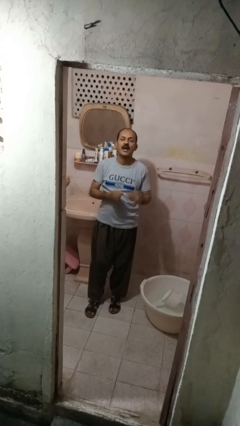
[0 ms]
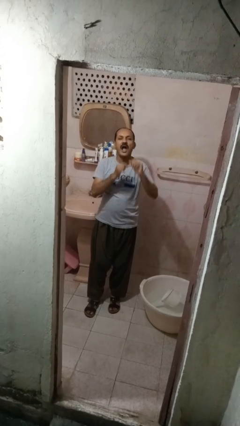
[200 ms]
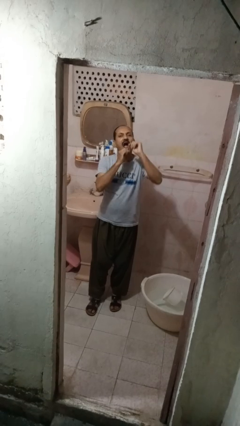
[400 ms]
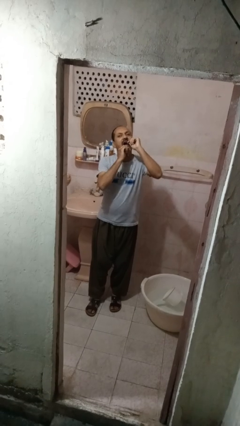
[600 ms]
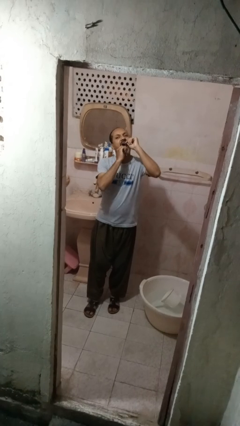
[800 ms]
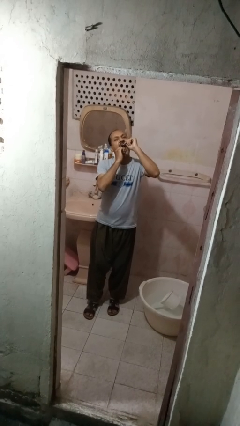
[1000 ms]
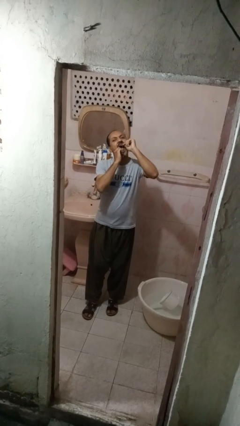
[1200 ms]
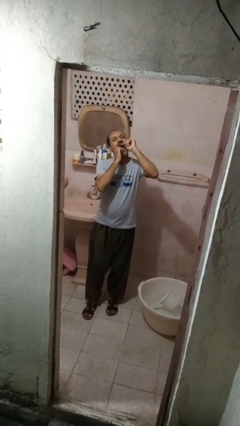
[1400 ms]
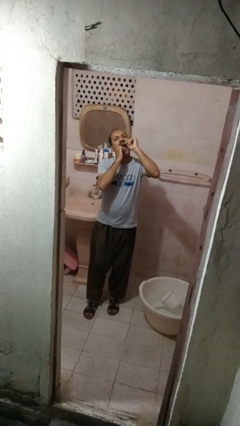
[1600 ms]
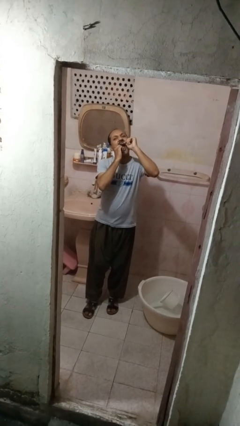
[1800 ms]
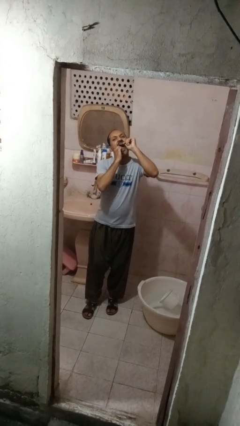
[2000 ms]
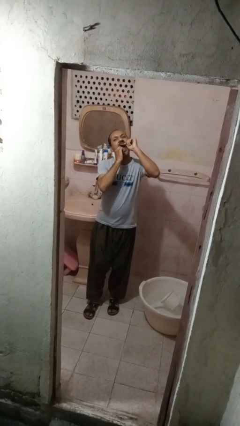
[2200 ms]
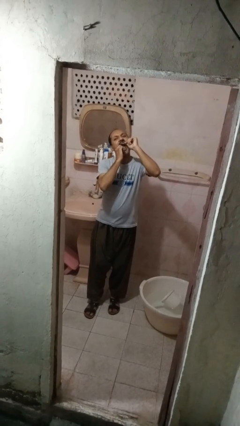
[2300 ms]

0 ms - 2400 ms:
person flosses

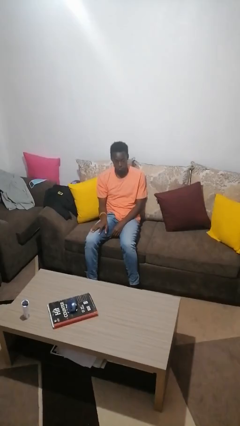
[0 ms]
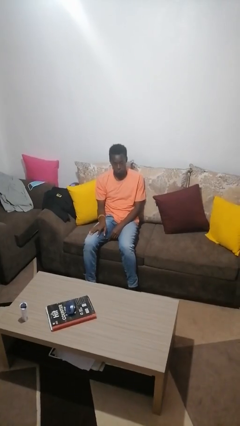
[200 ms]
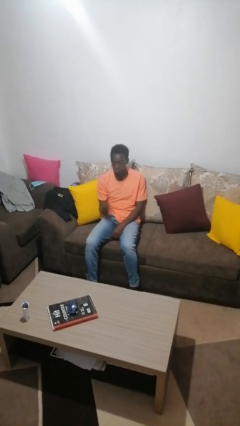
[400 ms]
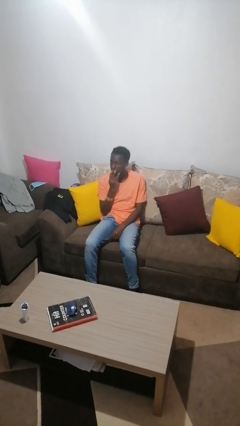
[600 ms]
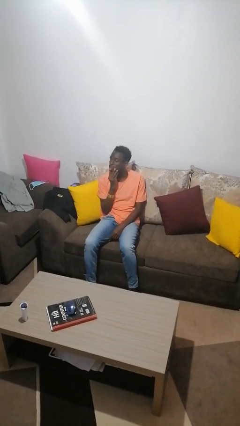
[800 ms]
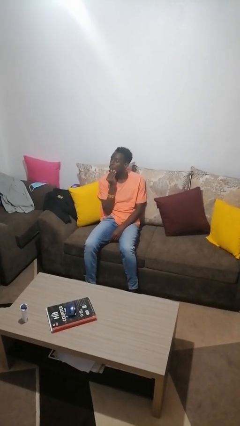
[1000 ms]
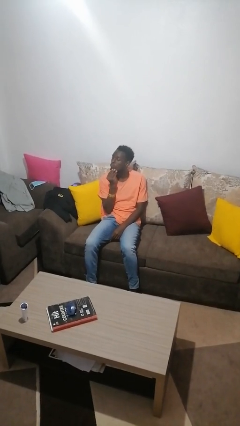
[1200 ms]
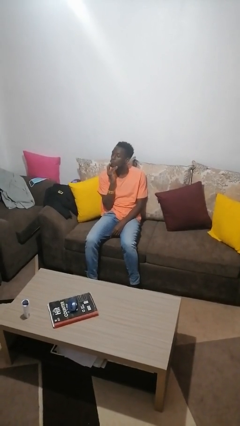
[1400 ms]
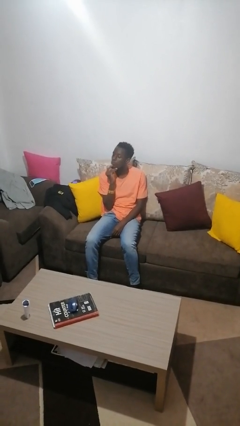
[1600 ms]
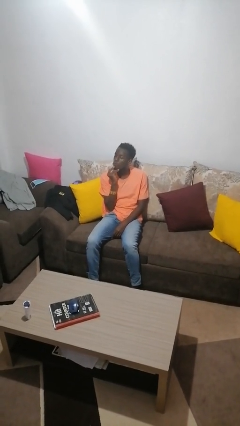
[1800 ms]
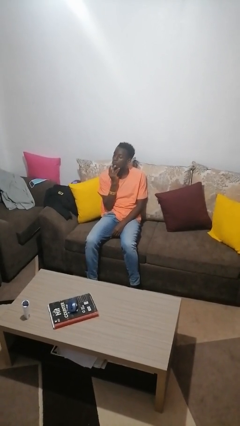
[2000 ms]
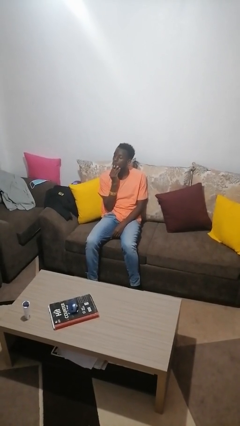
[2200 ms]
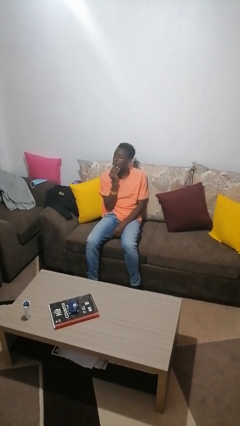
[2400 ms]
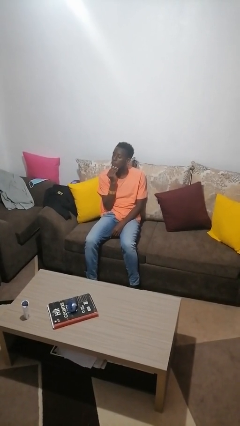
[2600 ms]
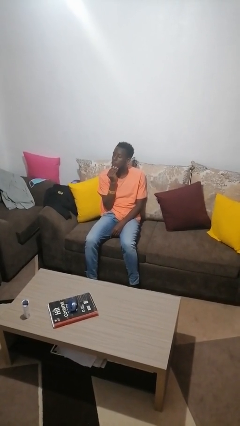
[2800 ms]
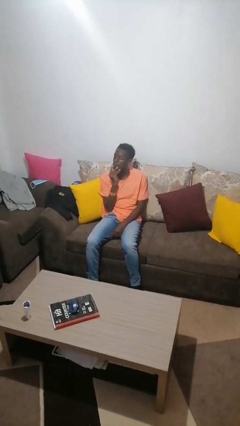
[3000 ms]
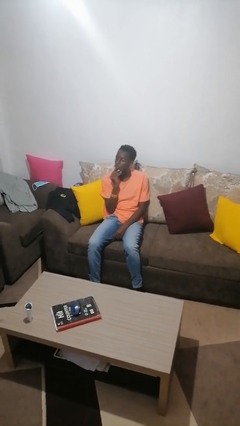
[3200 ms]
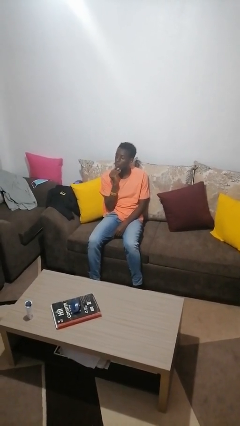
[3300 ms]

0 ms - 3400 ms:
person strokes chin

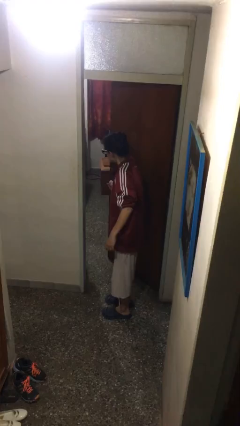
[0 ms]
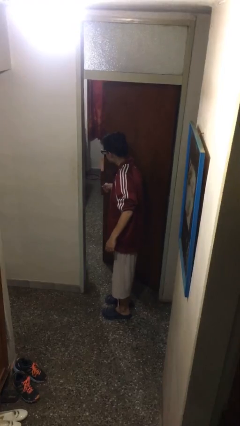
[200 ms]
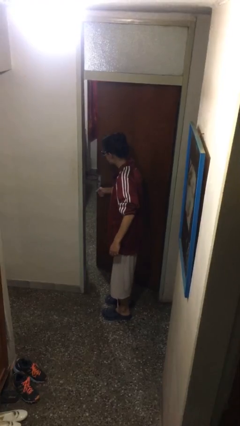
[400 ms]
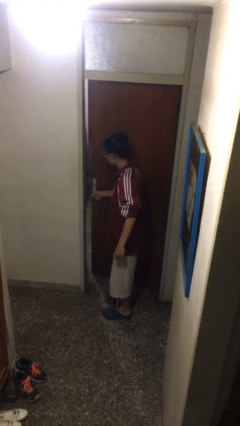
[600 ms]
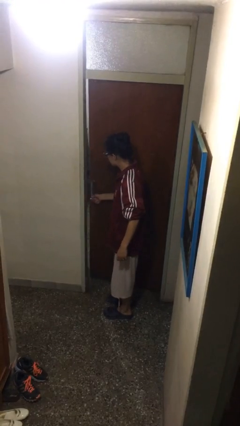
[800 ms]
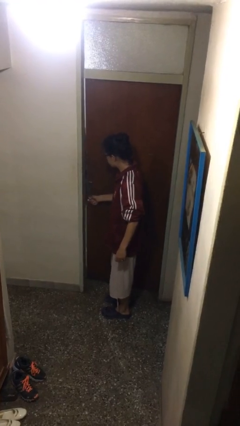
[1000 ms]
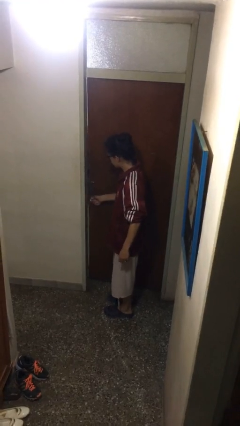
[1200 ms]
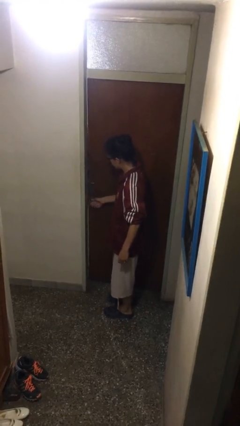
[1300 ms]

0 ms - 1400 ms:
person closes facility door

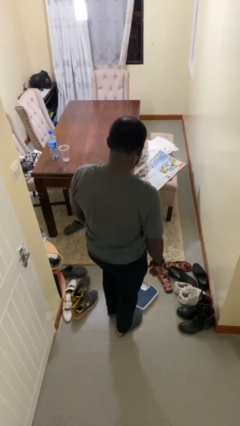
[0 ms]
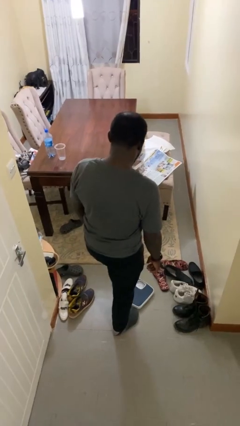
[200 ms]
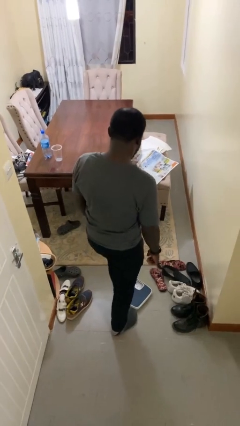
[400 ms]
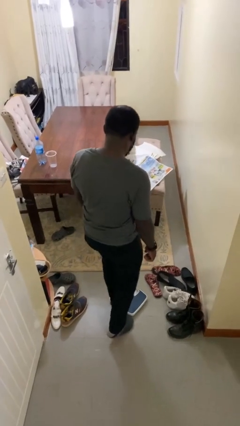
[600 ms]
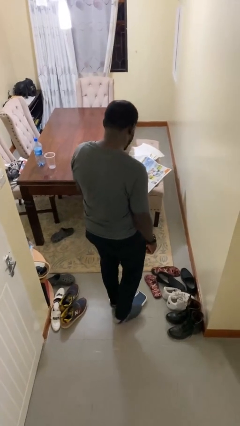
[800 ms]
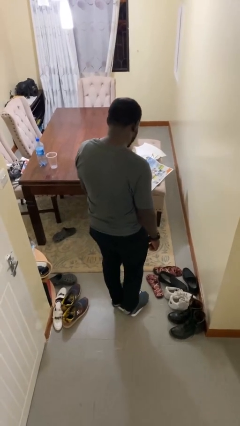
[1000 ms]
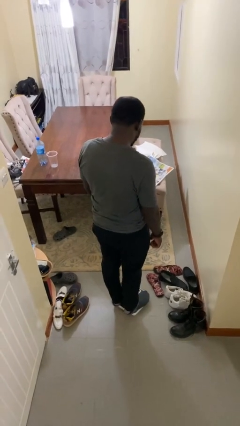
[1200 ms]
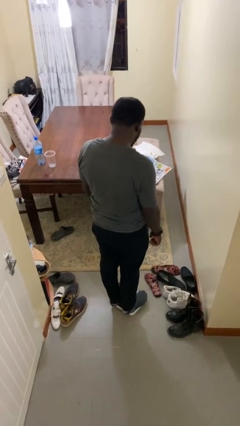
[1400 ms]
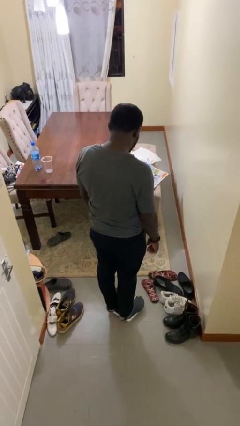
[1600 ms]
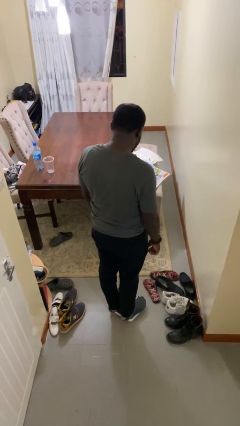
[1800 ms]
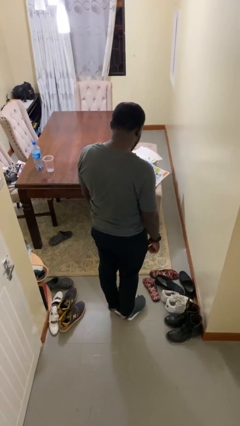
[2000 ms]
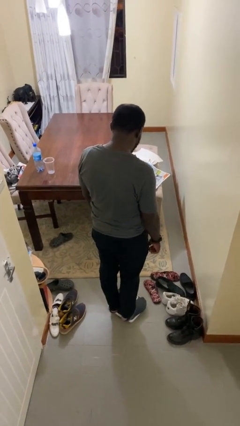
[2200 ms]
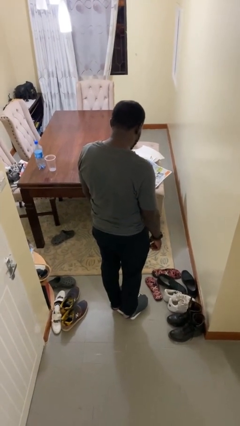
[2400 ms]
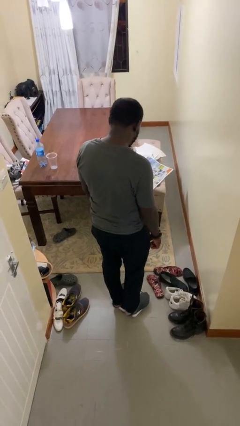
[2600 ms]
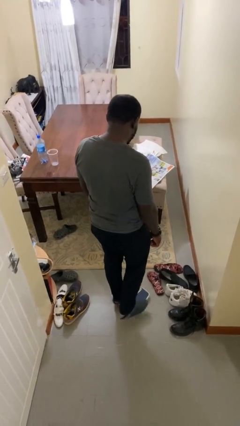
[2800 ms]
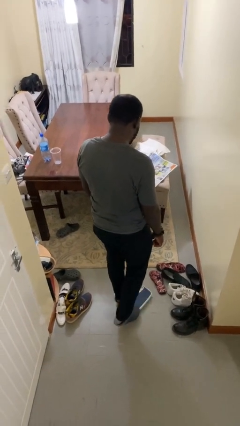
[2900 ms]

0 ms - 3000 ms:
person uses bodyweight scale

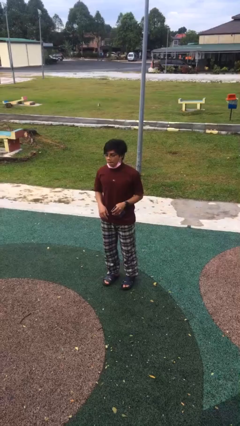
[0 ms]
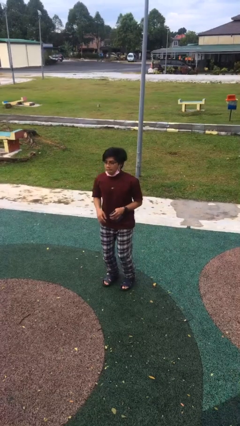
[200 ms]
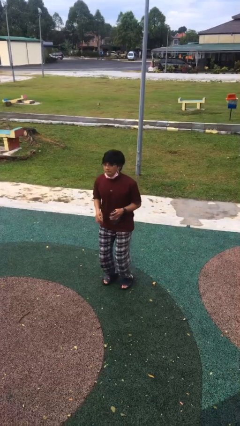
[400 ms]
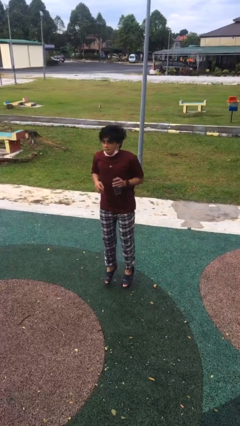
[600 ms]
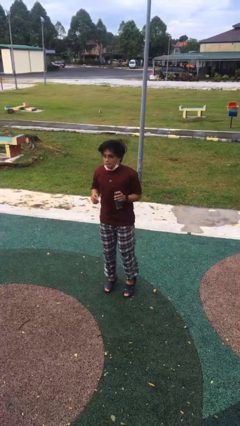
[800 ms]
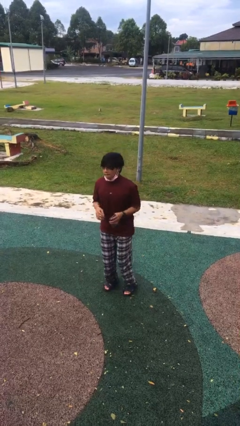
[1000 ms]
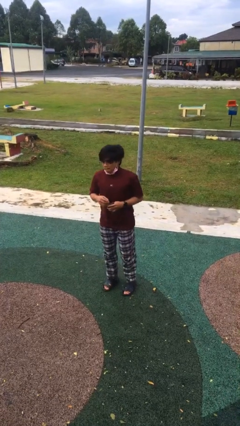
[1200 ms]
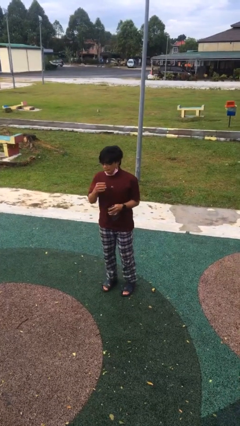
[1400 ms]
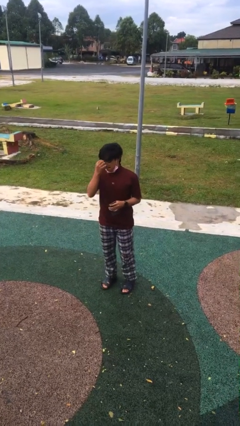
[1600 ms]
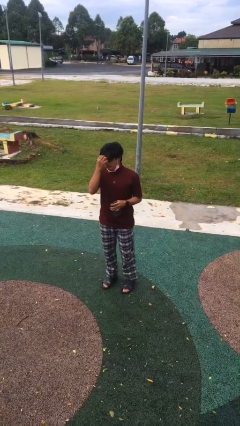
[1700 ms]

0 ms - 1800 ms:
person jumps

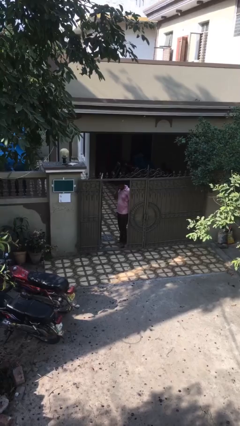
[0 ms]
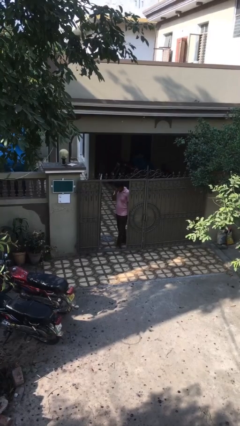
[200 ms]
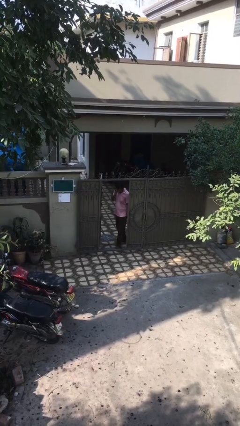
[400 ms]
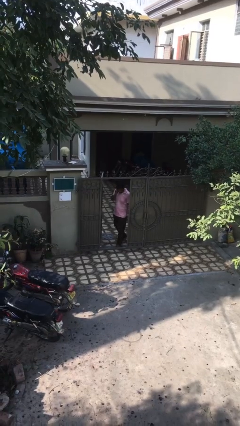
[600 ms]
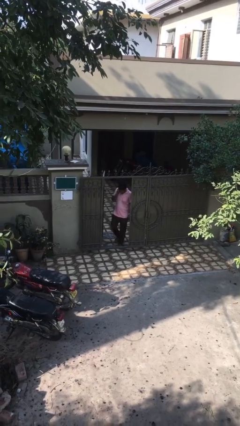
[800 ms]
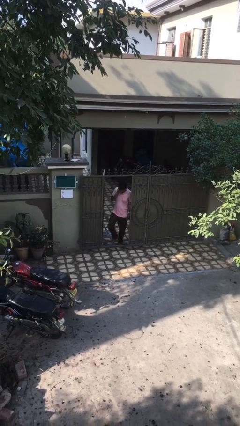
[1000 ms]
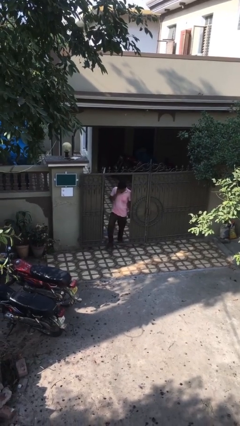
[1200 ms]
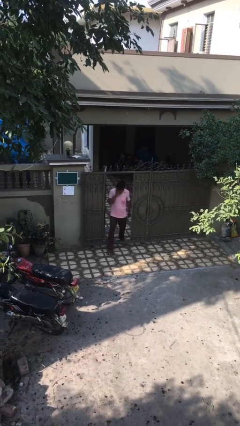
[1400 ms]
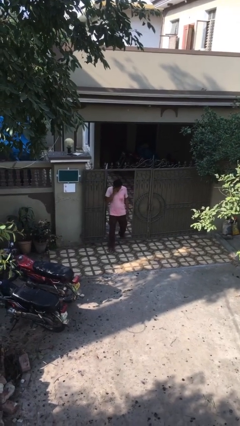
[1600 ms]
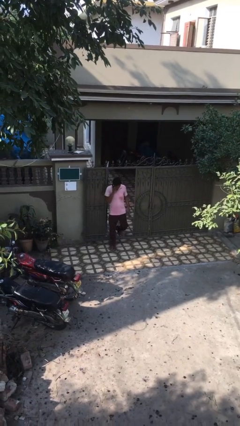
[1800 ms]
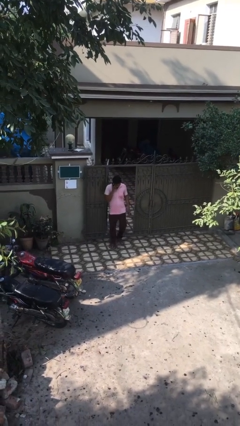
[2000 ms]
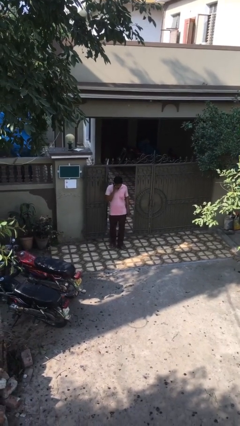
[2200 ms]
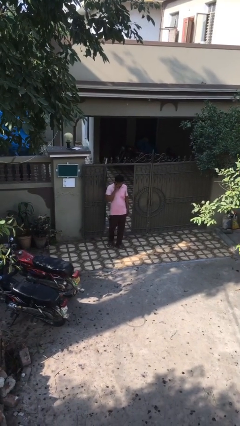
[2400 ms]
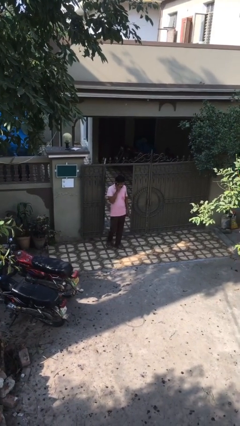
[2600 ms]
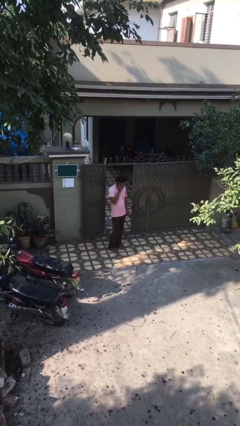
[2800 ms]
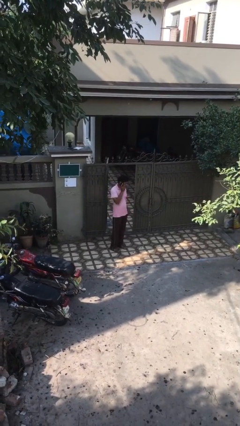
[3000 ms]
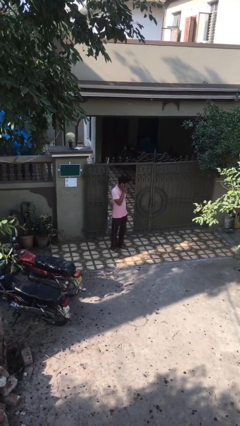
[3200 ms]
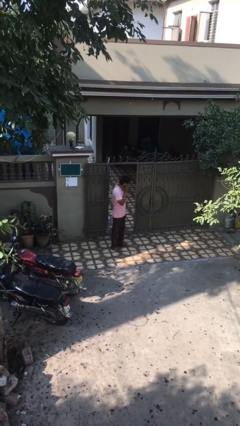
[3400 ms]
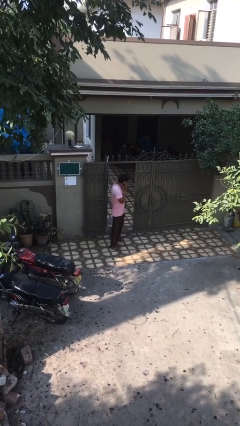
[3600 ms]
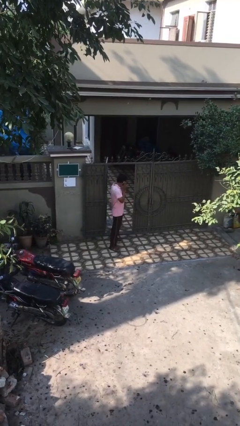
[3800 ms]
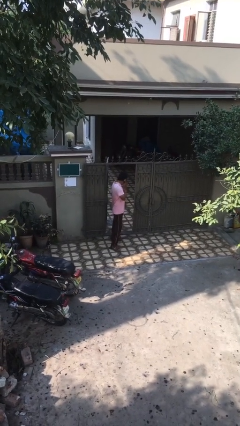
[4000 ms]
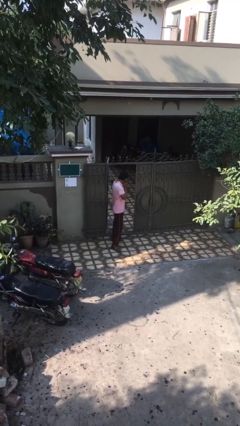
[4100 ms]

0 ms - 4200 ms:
person enters scene through structure

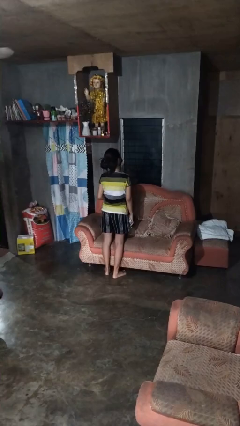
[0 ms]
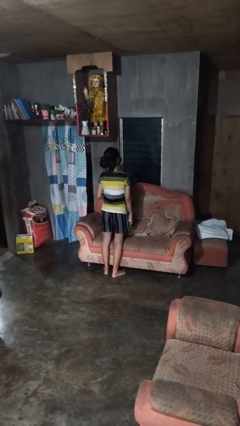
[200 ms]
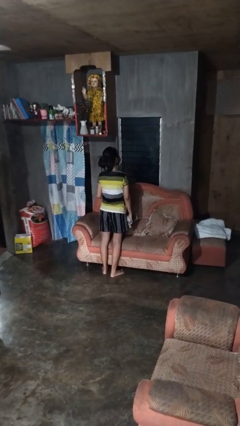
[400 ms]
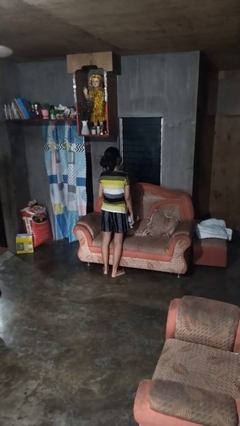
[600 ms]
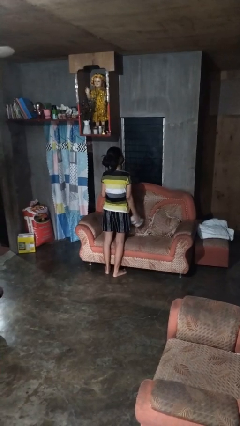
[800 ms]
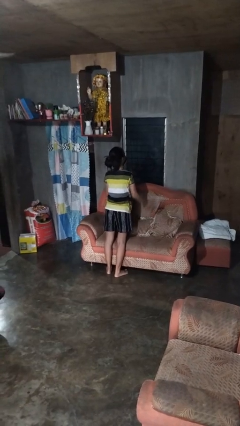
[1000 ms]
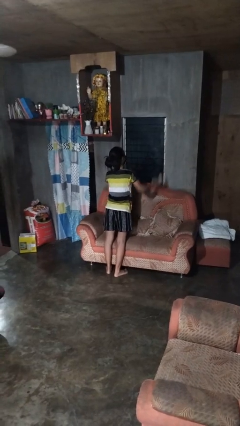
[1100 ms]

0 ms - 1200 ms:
person washes window
